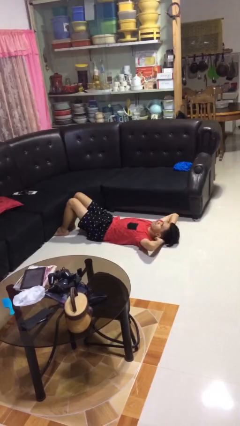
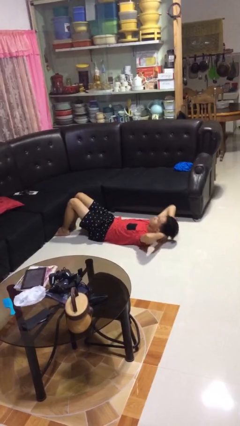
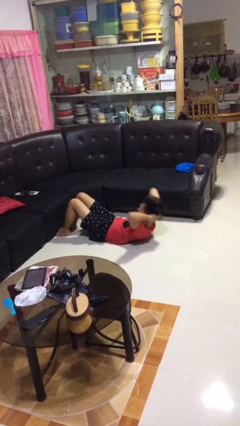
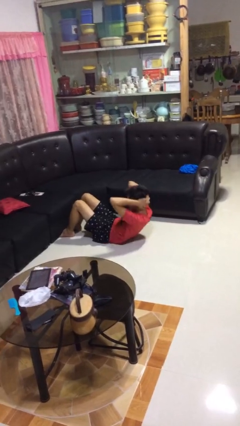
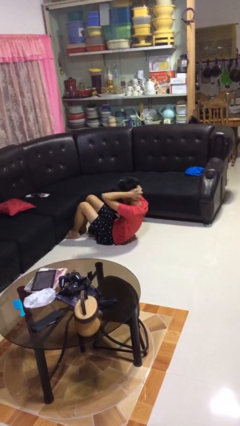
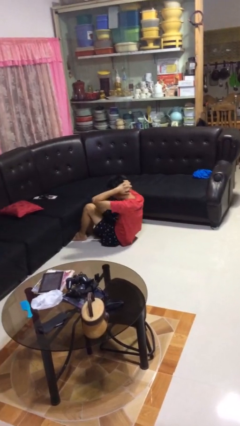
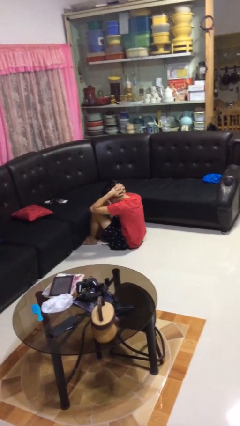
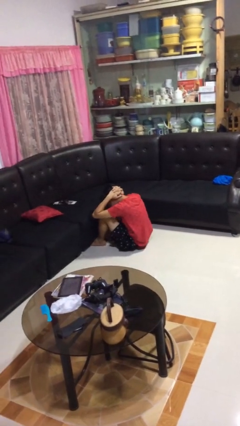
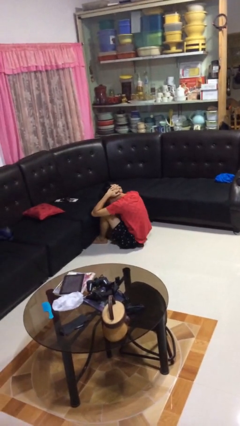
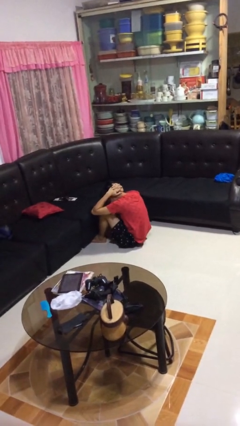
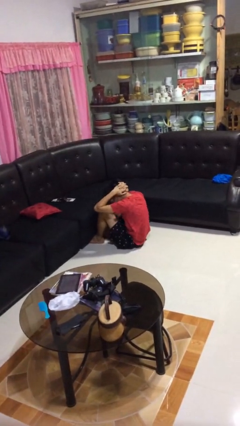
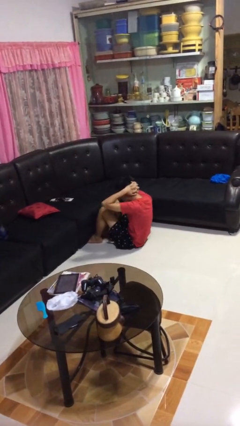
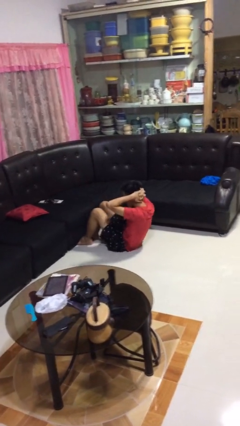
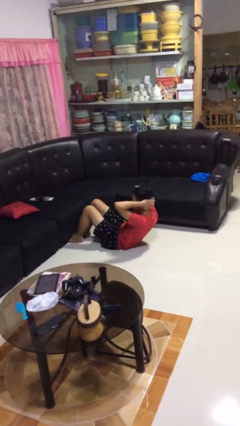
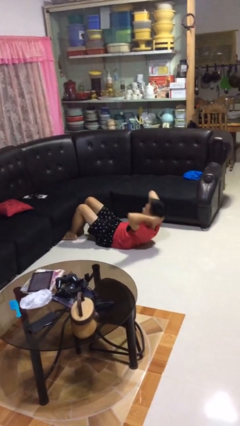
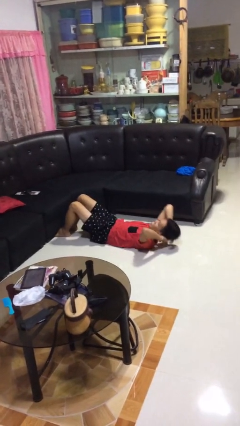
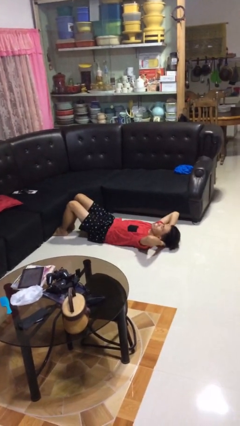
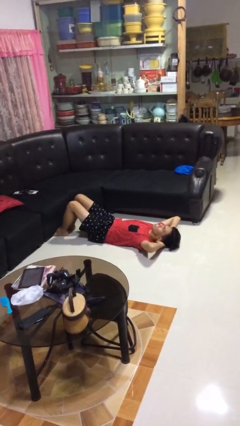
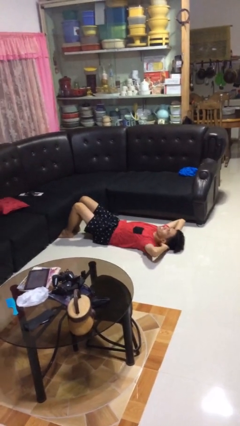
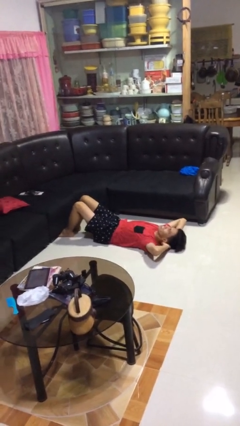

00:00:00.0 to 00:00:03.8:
person exercises with situp

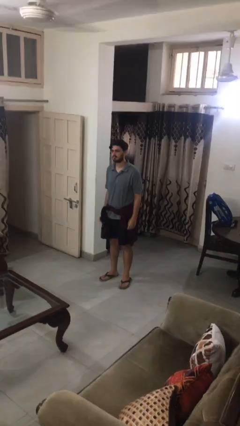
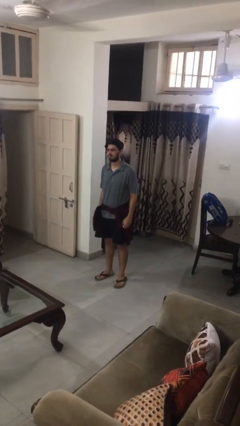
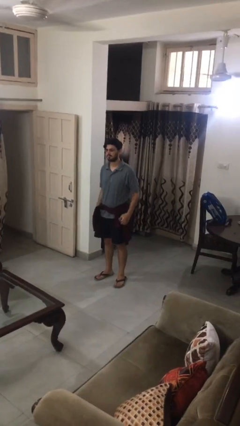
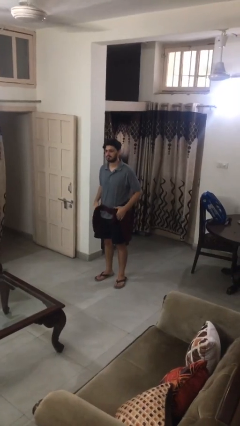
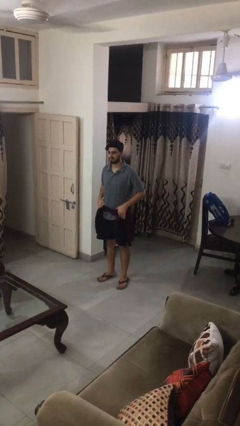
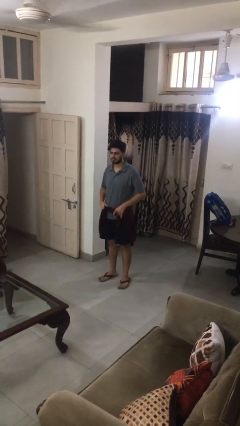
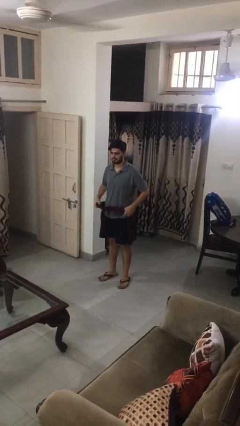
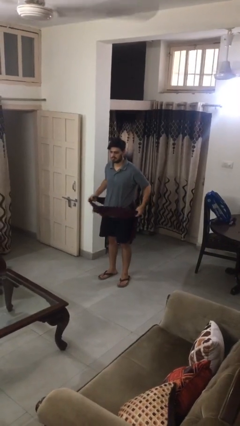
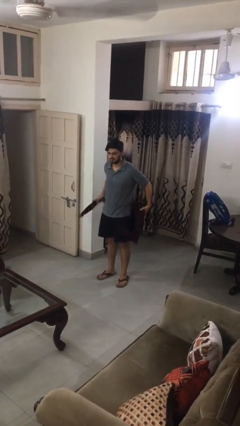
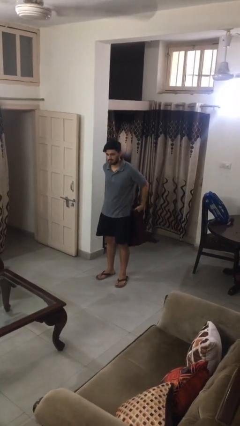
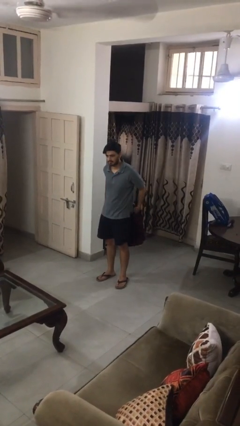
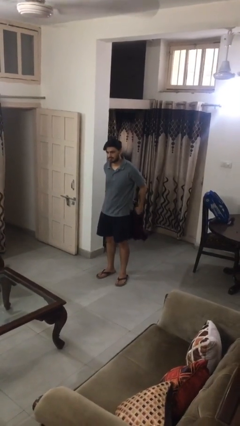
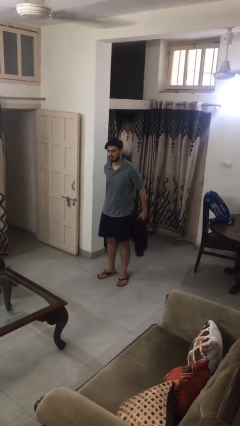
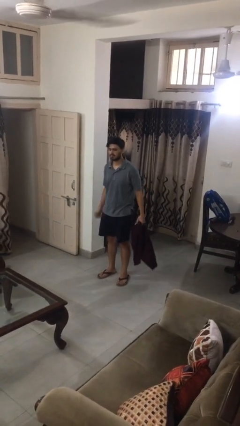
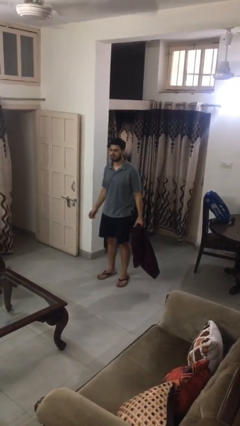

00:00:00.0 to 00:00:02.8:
person unties jacket around waist

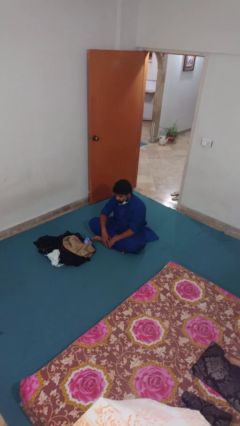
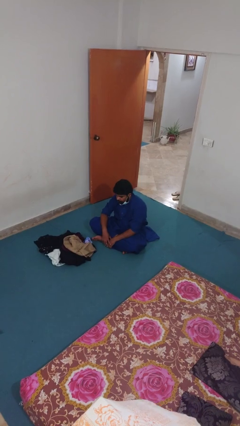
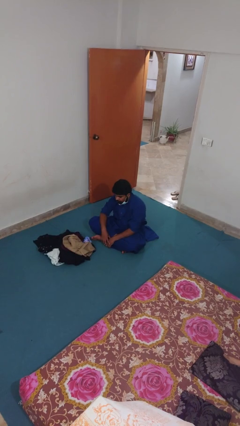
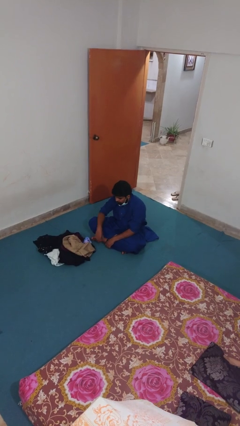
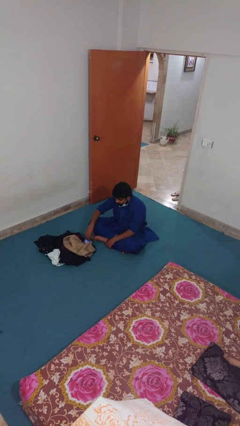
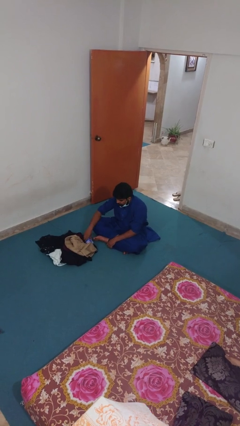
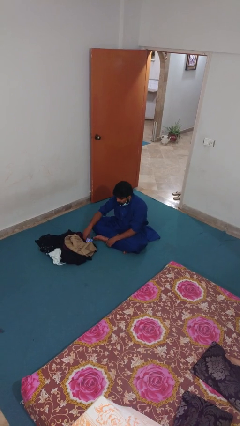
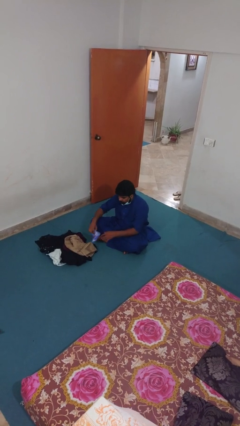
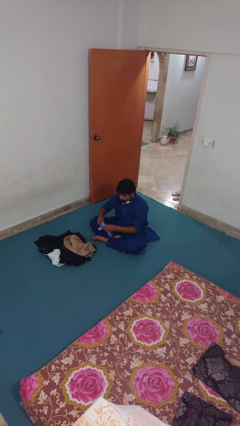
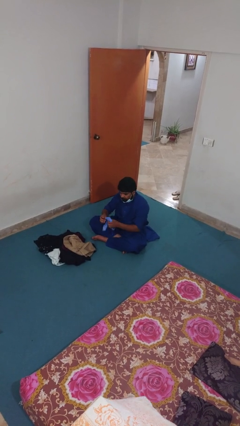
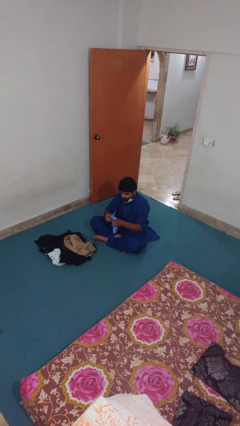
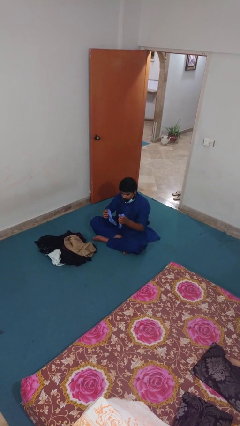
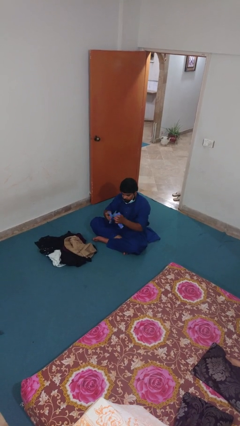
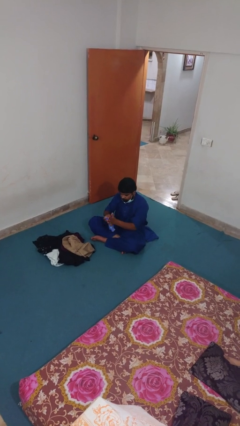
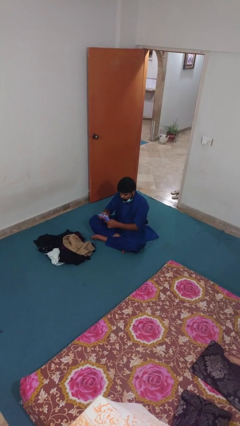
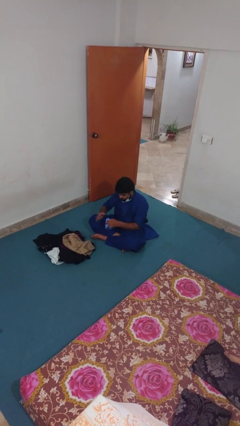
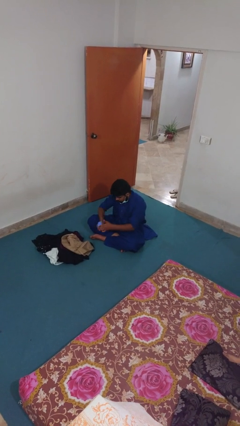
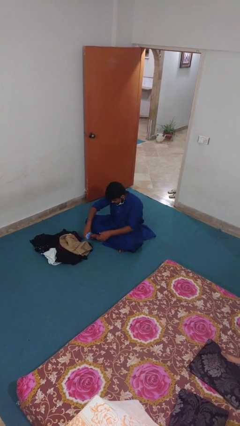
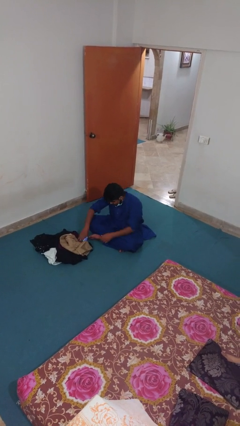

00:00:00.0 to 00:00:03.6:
person folds socks

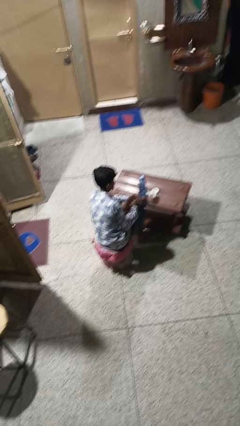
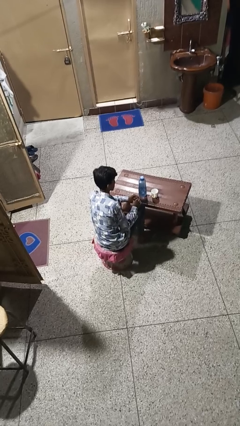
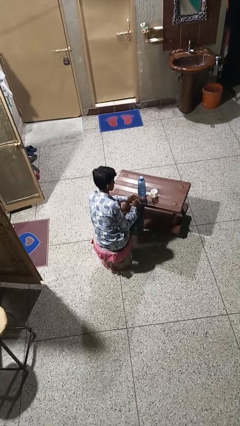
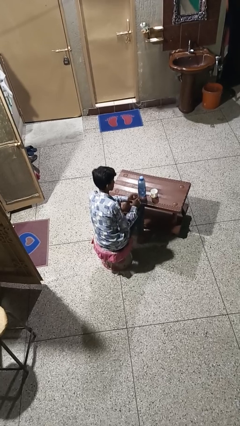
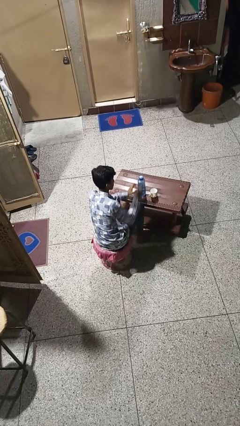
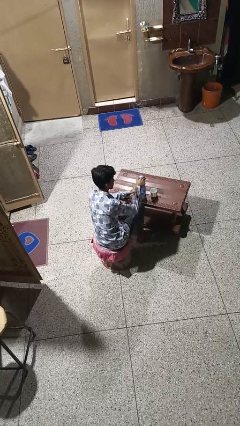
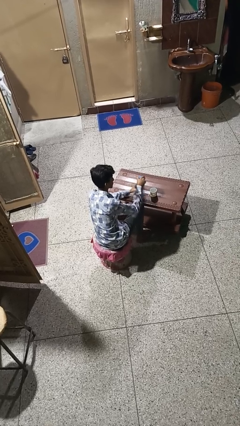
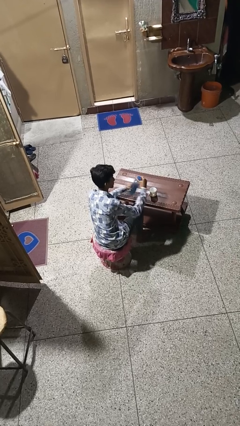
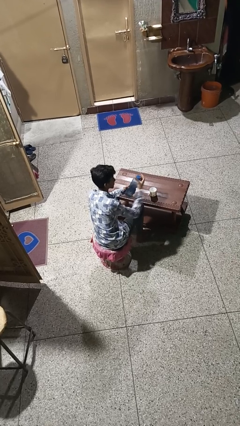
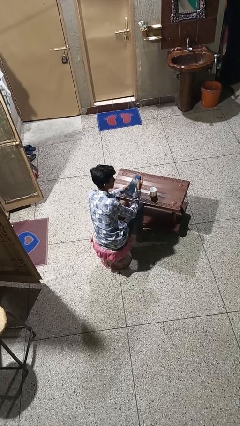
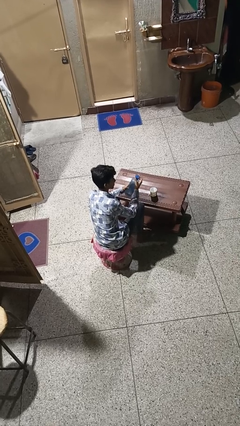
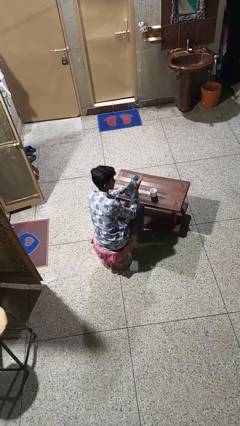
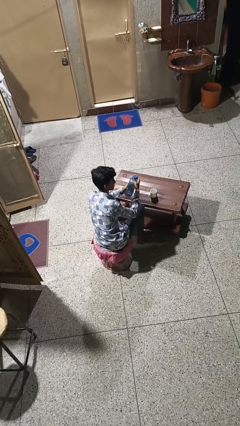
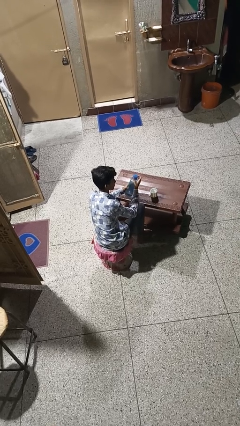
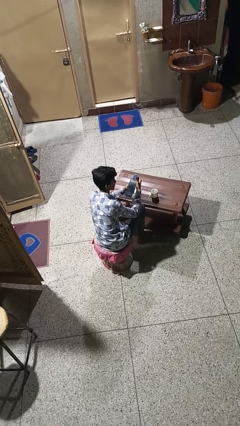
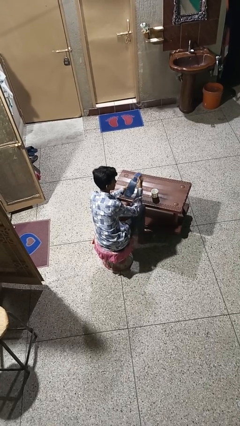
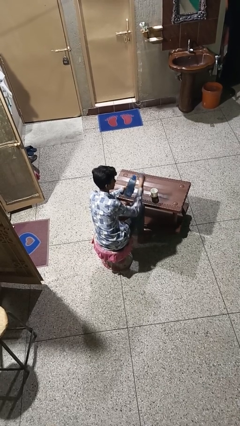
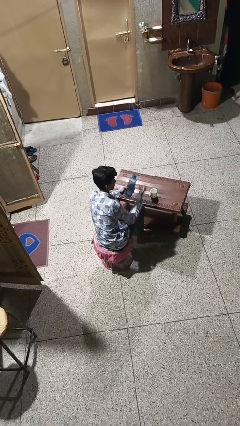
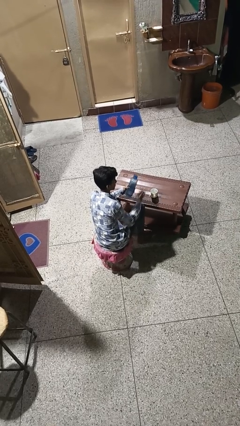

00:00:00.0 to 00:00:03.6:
person unscrews lid from bottle

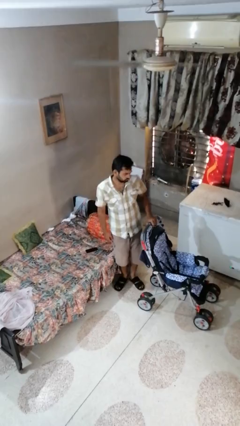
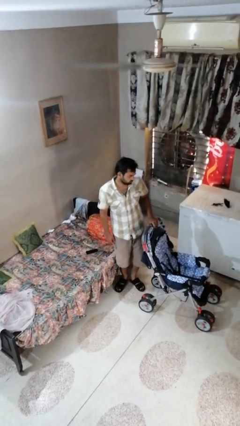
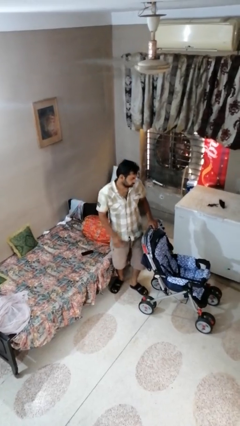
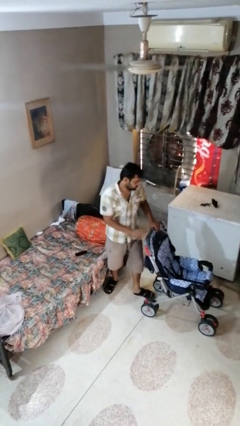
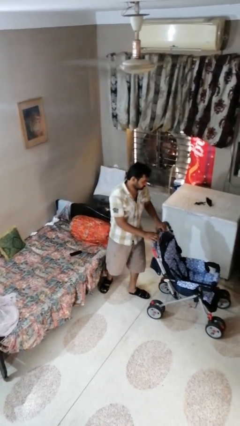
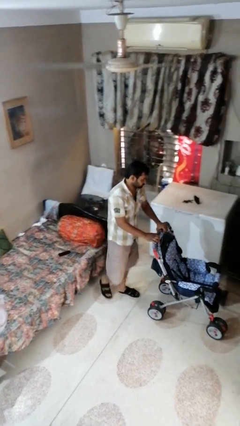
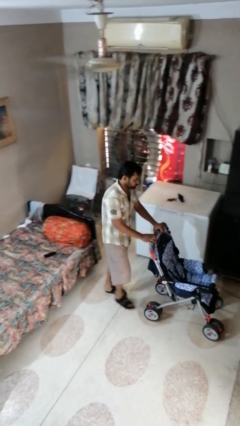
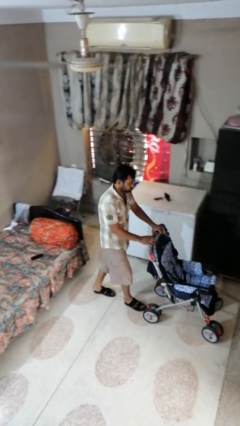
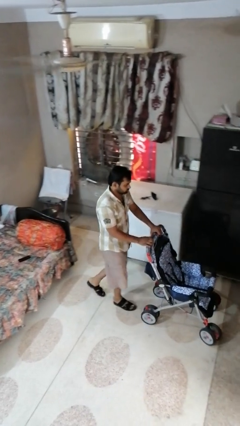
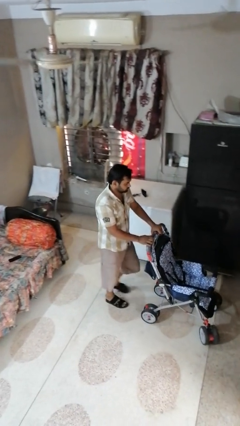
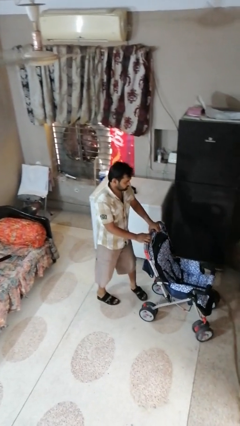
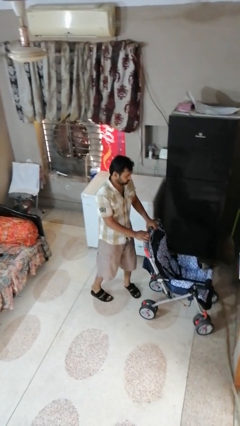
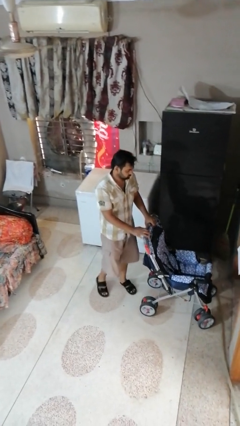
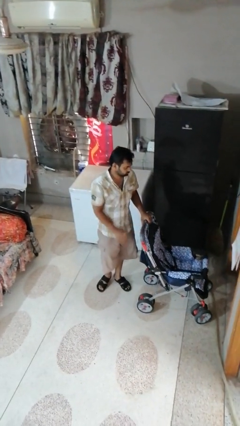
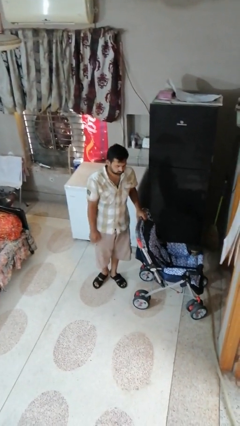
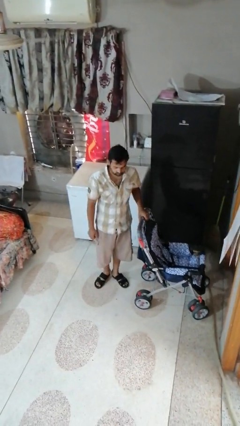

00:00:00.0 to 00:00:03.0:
person pushes wheeled cart

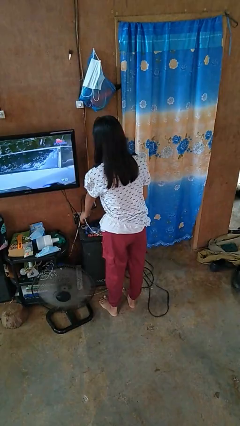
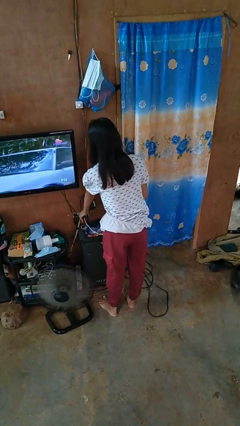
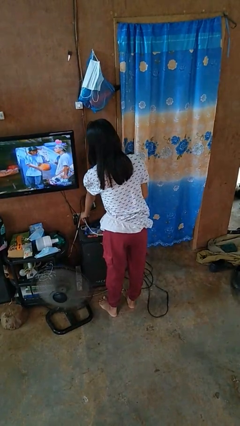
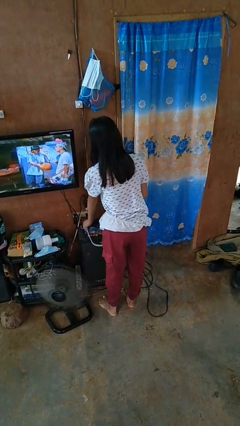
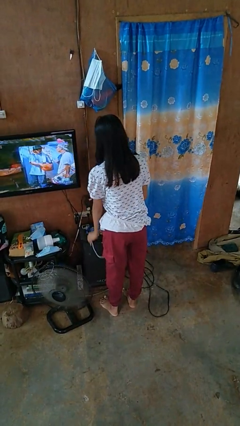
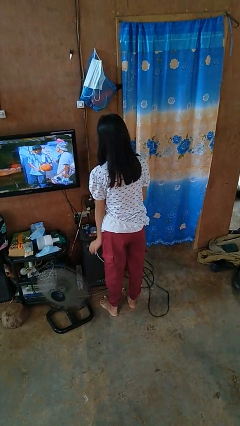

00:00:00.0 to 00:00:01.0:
person unplugs from electrical socket
